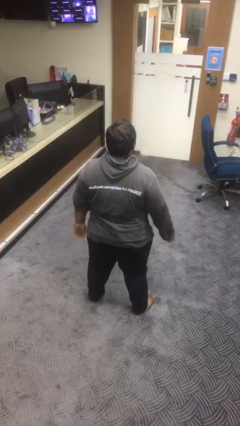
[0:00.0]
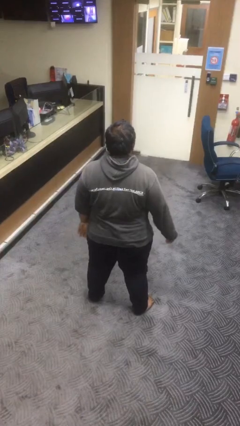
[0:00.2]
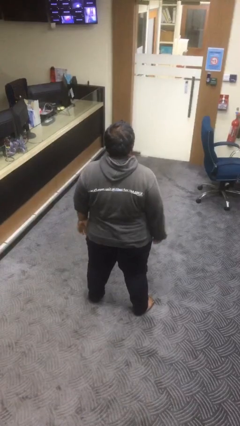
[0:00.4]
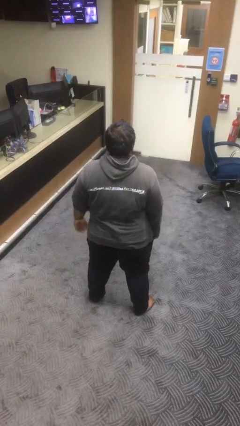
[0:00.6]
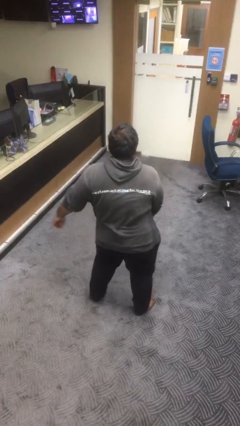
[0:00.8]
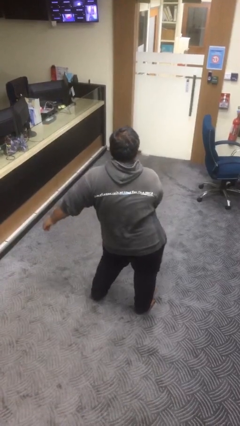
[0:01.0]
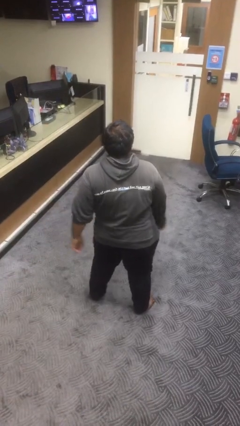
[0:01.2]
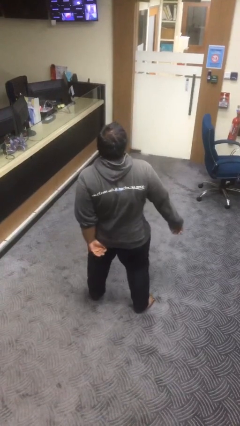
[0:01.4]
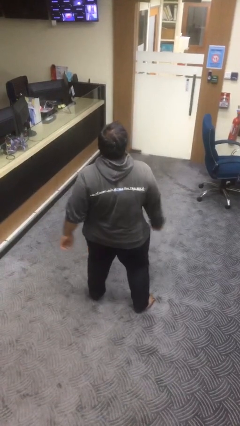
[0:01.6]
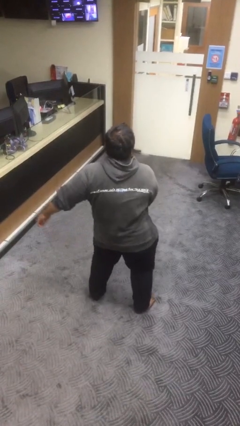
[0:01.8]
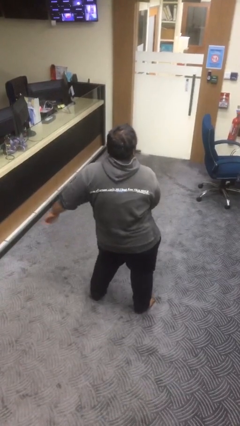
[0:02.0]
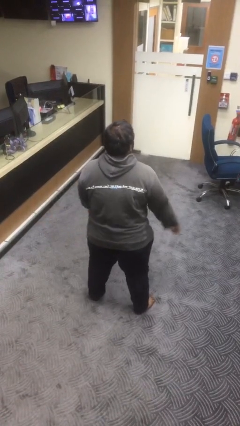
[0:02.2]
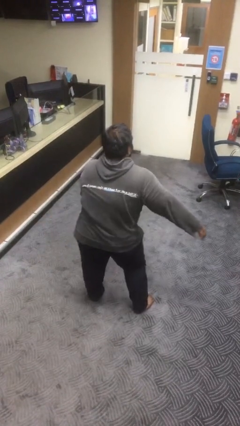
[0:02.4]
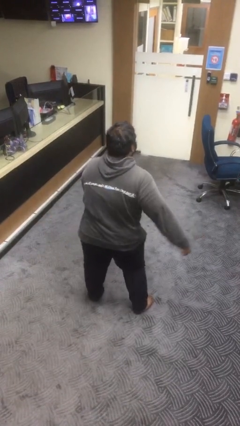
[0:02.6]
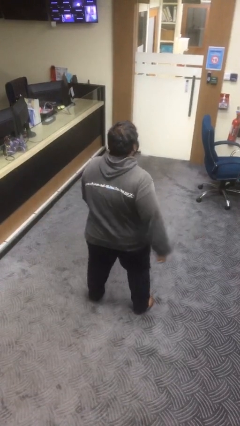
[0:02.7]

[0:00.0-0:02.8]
person dances in place

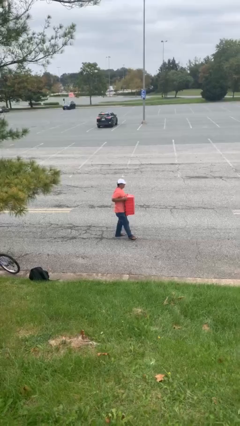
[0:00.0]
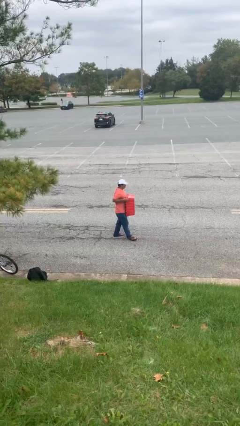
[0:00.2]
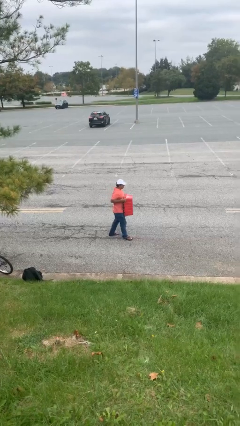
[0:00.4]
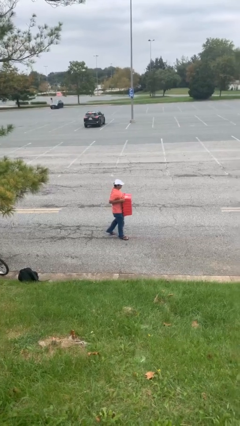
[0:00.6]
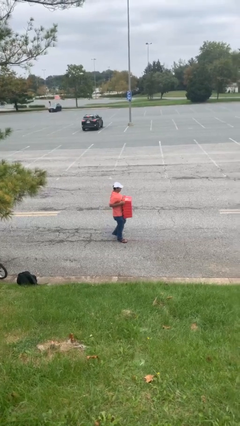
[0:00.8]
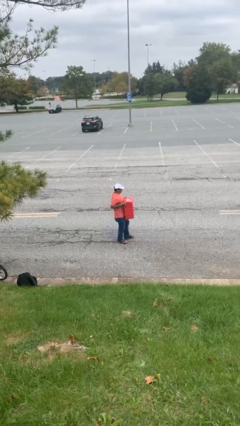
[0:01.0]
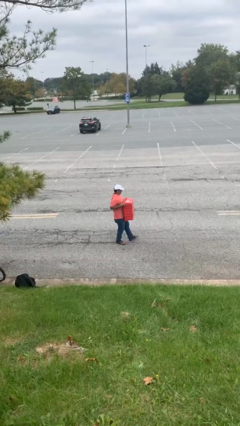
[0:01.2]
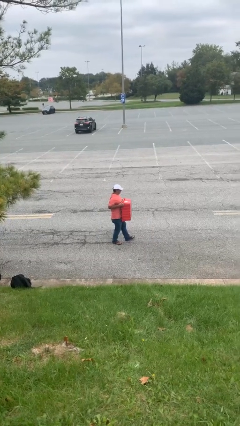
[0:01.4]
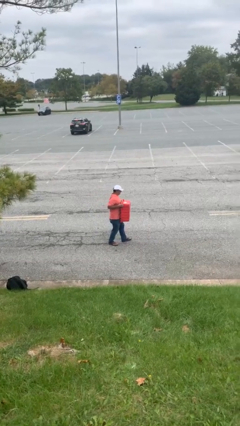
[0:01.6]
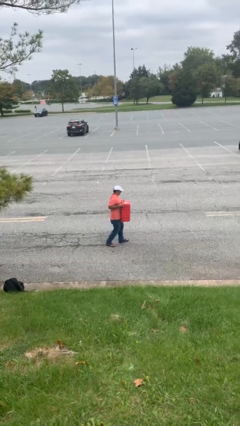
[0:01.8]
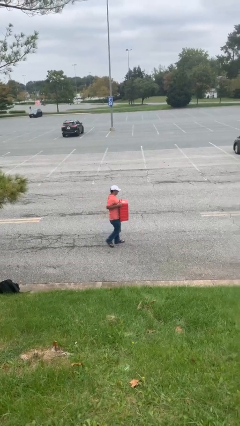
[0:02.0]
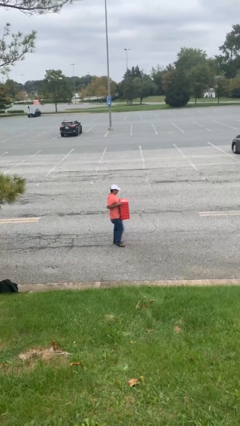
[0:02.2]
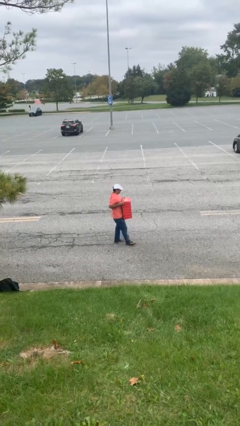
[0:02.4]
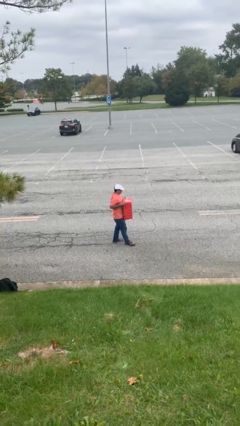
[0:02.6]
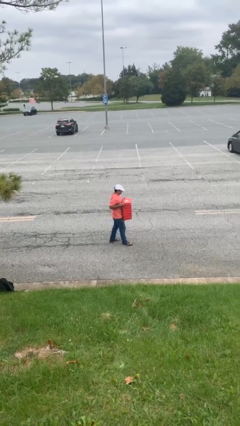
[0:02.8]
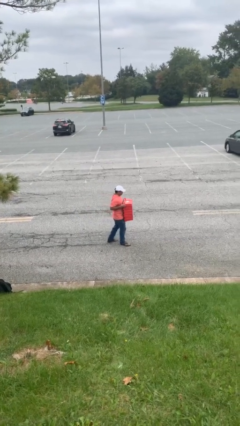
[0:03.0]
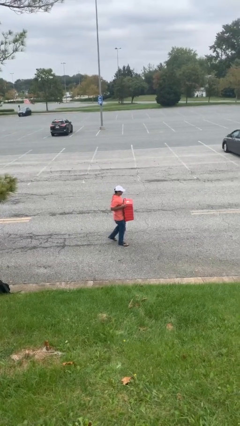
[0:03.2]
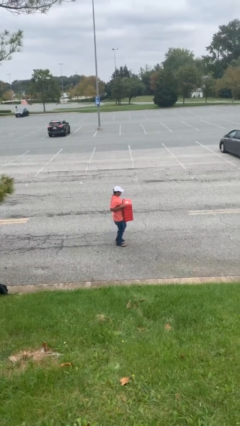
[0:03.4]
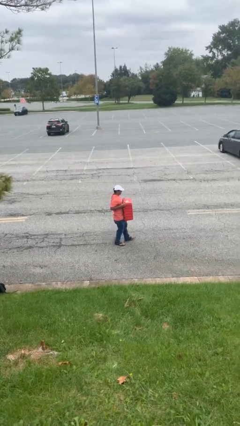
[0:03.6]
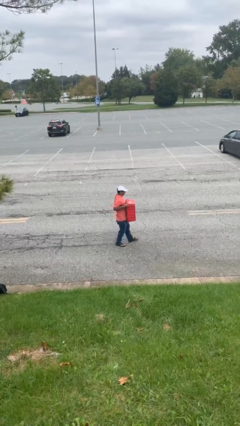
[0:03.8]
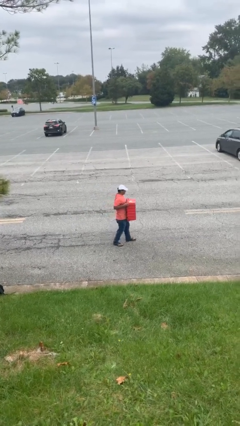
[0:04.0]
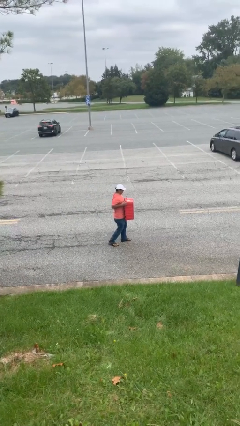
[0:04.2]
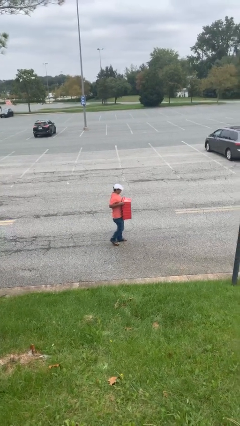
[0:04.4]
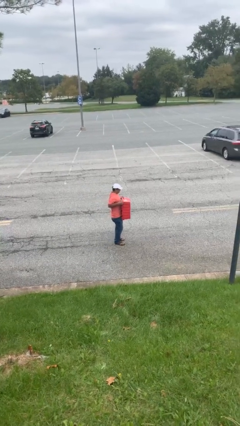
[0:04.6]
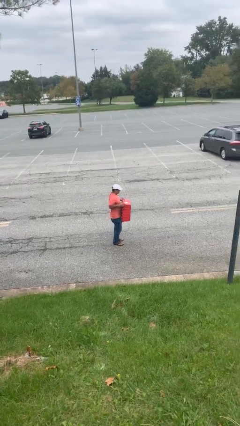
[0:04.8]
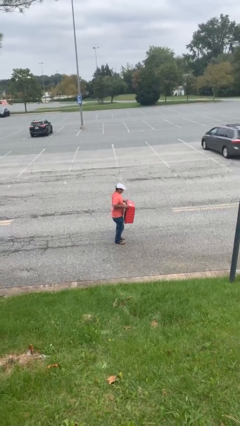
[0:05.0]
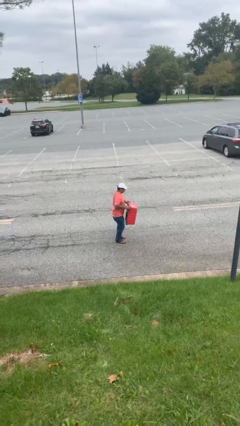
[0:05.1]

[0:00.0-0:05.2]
person carries heavy object

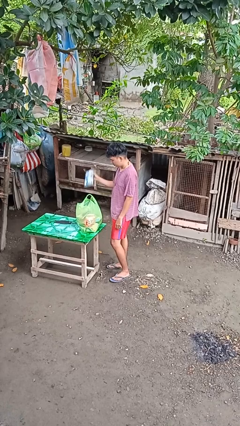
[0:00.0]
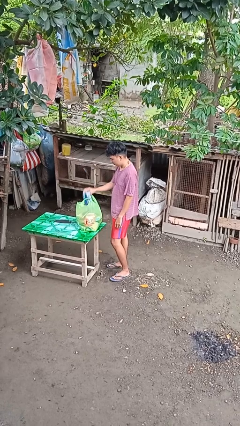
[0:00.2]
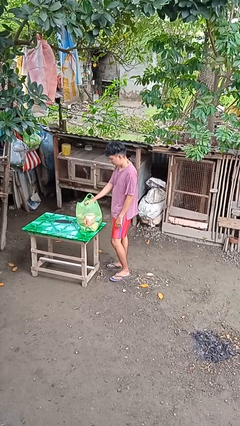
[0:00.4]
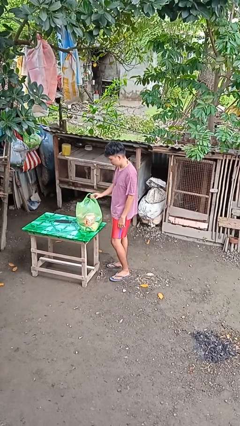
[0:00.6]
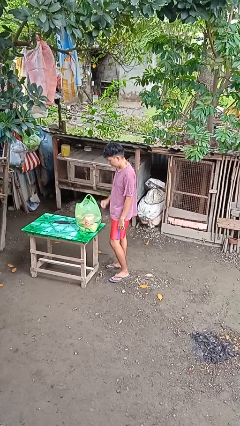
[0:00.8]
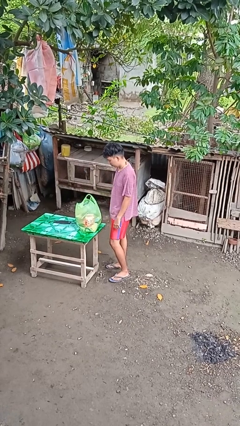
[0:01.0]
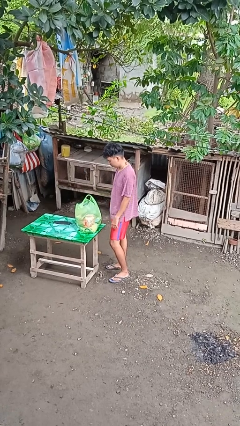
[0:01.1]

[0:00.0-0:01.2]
person puts object into bag

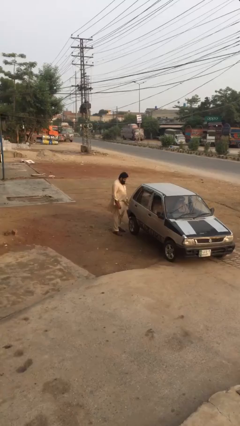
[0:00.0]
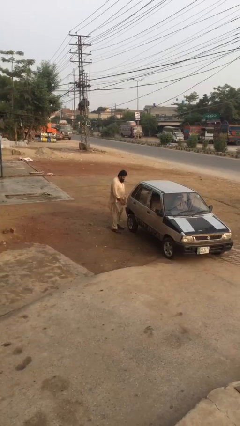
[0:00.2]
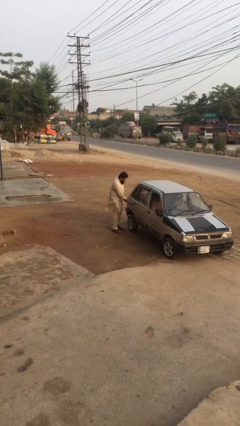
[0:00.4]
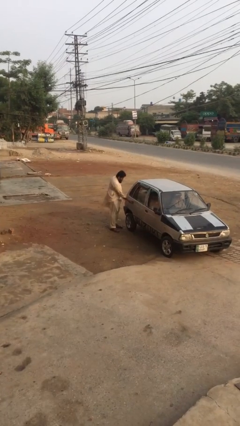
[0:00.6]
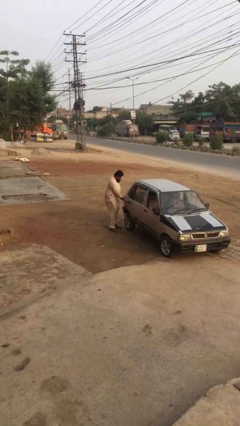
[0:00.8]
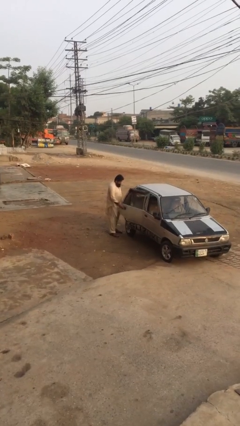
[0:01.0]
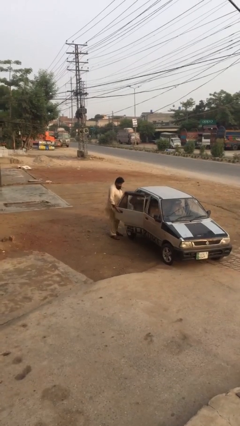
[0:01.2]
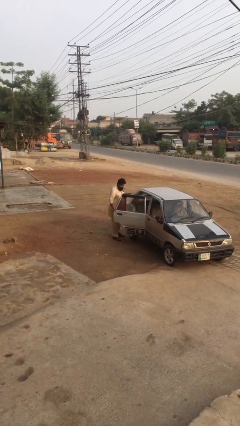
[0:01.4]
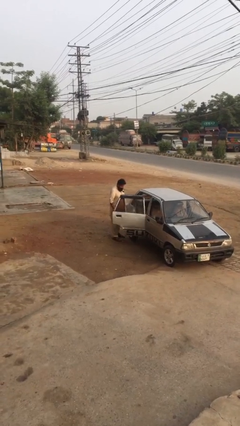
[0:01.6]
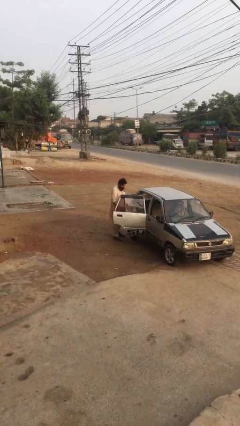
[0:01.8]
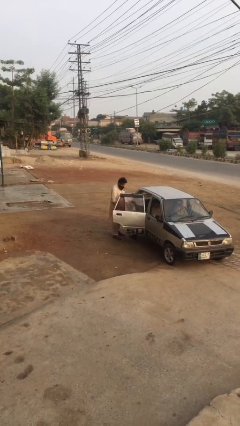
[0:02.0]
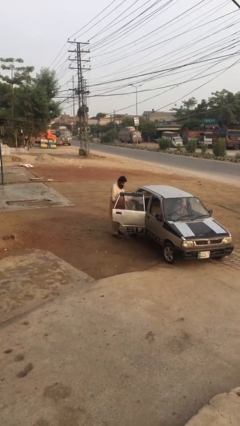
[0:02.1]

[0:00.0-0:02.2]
person opens car door

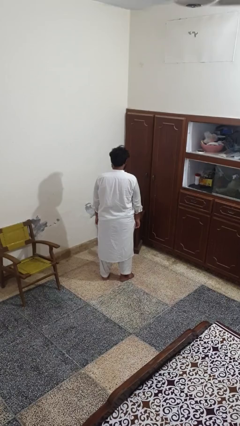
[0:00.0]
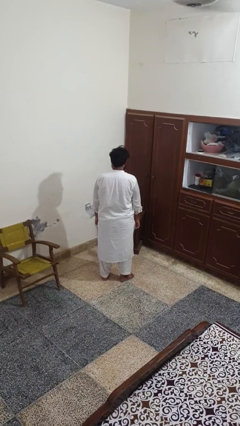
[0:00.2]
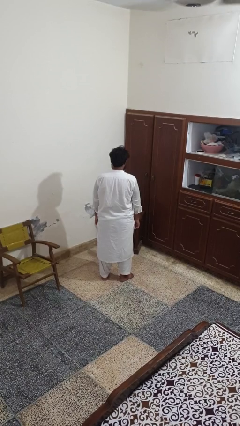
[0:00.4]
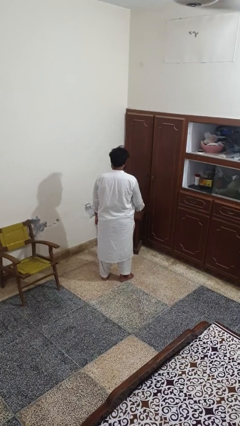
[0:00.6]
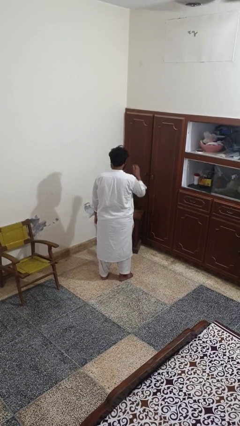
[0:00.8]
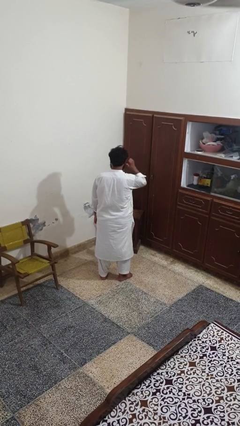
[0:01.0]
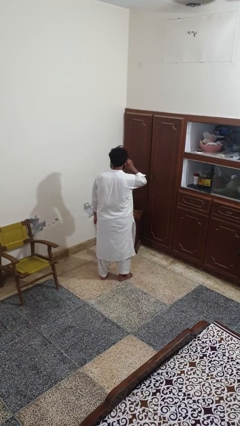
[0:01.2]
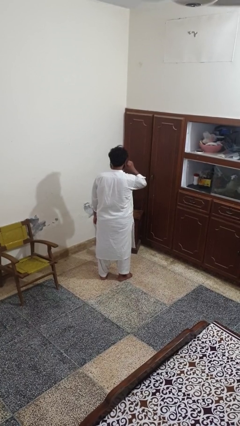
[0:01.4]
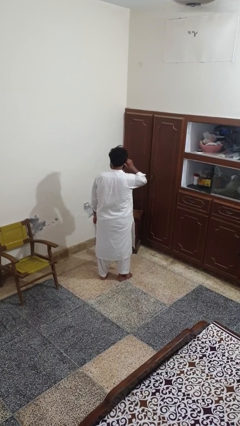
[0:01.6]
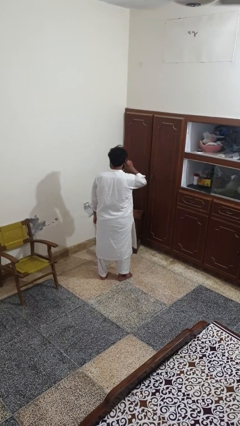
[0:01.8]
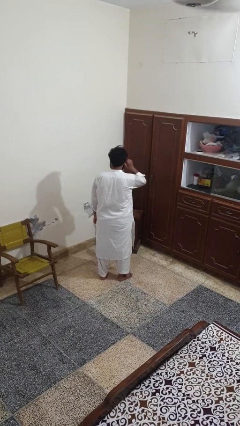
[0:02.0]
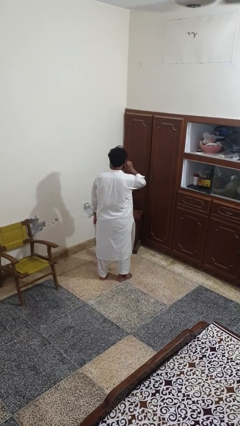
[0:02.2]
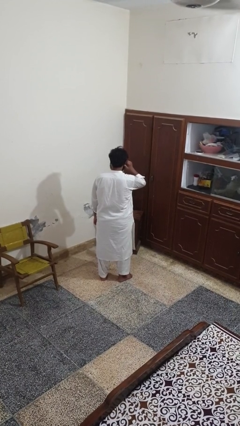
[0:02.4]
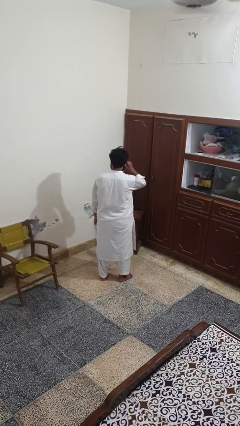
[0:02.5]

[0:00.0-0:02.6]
person touches earlobe

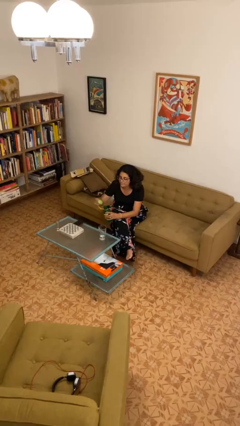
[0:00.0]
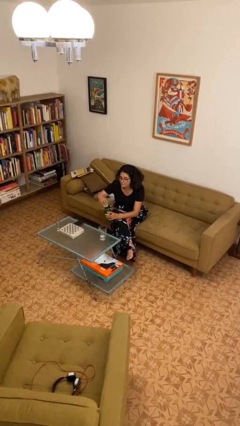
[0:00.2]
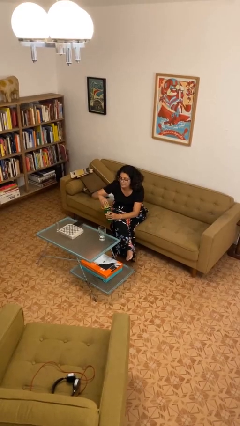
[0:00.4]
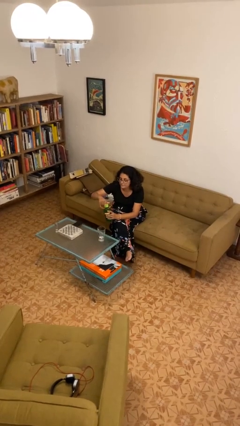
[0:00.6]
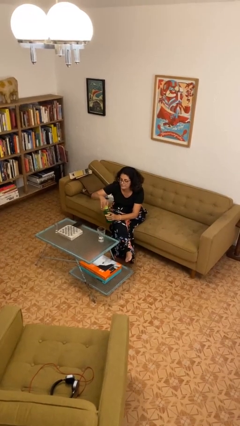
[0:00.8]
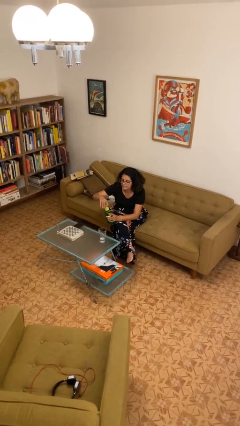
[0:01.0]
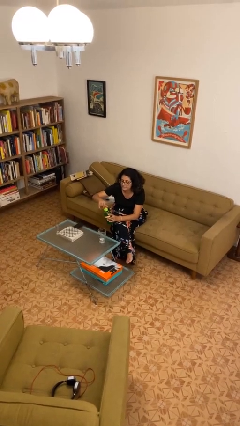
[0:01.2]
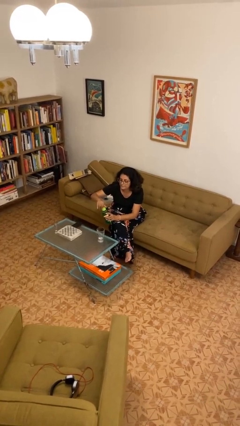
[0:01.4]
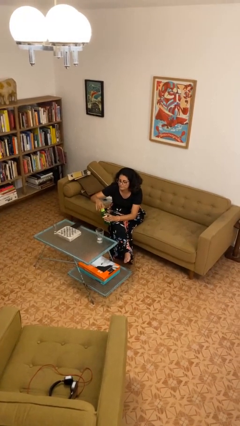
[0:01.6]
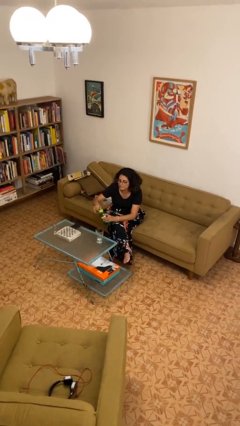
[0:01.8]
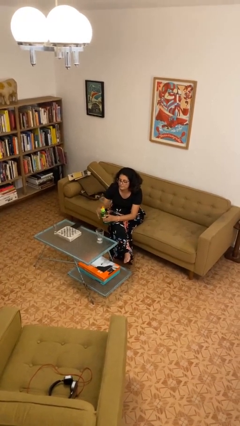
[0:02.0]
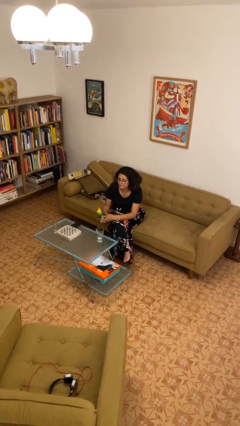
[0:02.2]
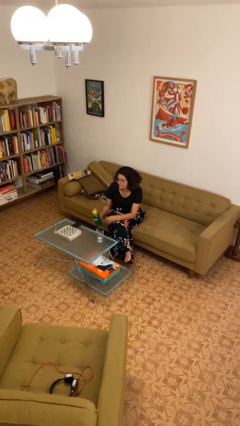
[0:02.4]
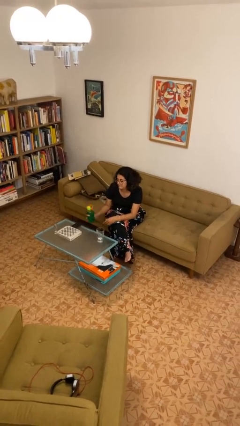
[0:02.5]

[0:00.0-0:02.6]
person screws lid to bottle

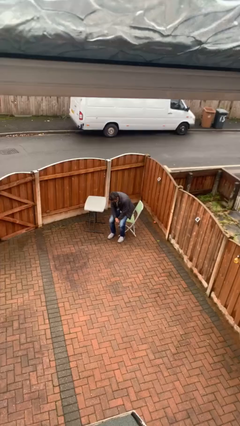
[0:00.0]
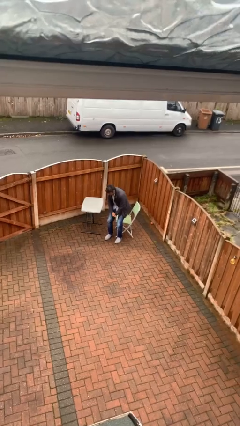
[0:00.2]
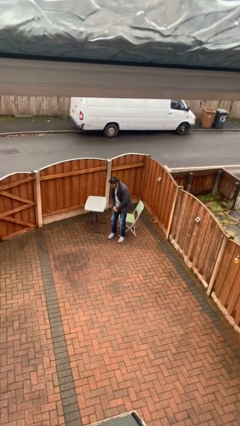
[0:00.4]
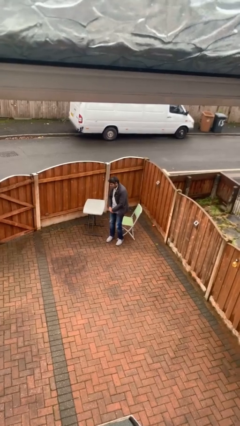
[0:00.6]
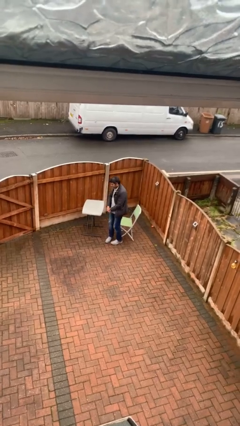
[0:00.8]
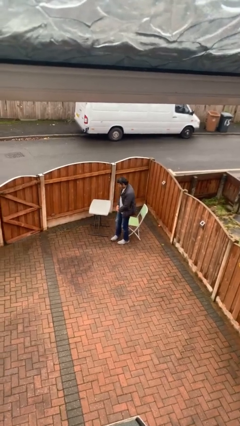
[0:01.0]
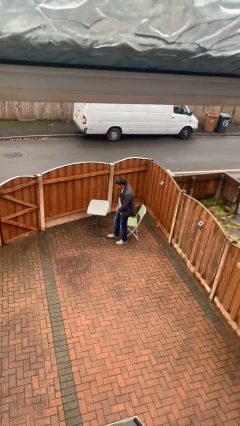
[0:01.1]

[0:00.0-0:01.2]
person stands up
